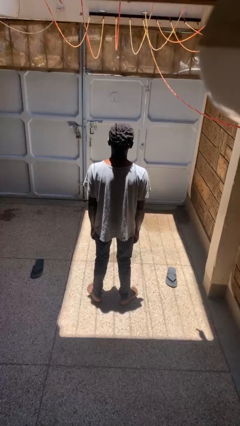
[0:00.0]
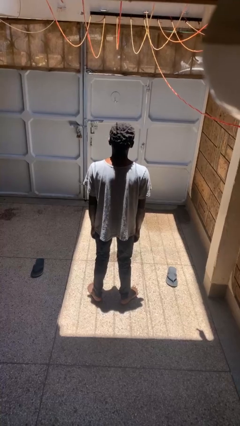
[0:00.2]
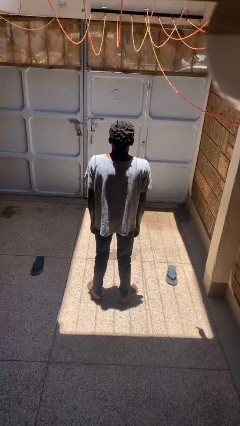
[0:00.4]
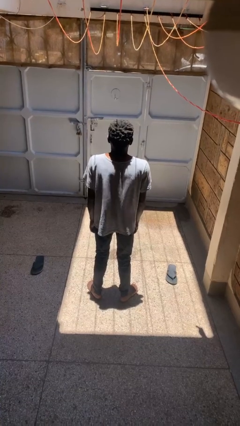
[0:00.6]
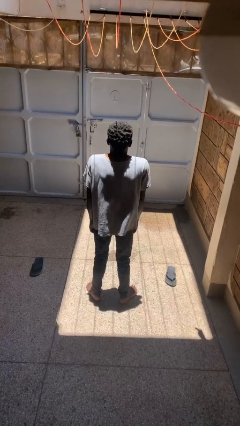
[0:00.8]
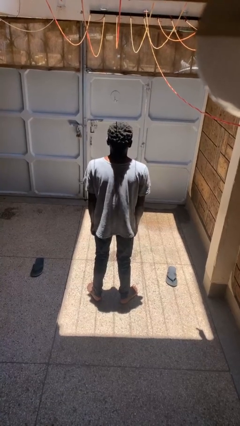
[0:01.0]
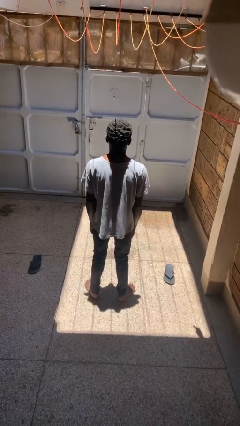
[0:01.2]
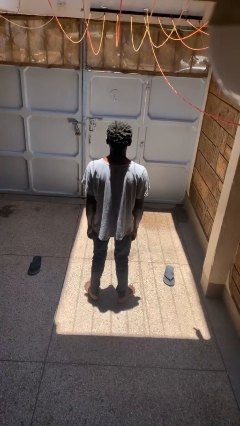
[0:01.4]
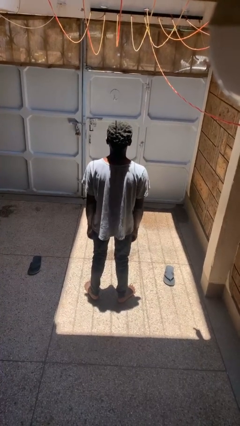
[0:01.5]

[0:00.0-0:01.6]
person shrugs

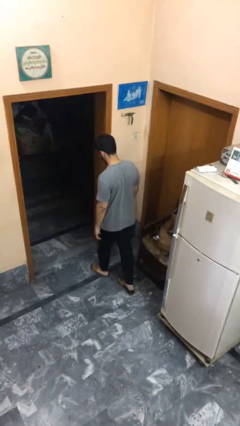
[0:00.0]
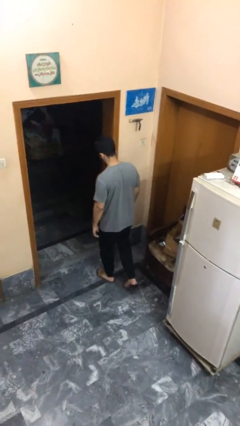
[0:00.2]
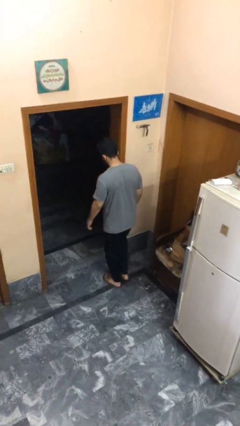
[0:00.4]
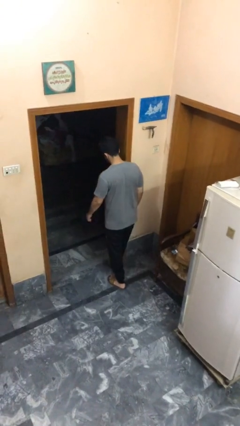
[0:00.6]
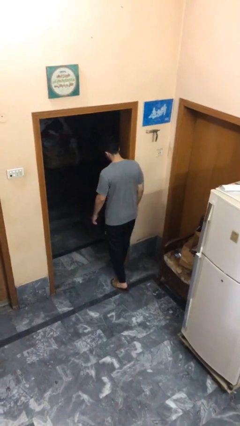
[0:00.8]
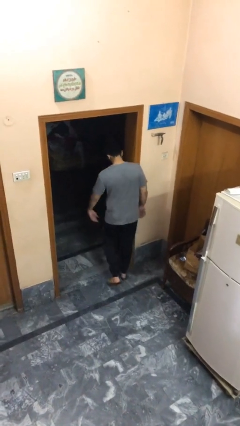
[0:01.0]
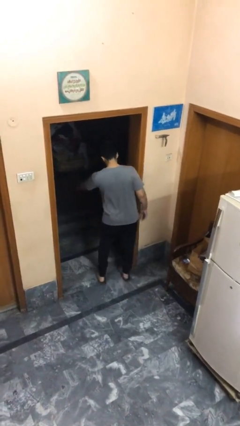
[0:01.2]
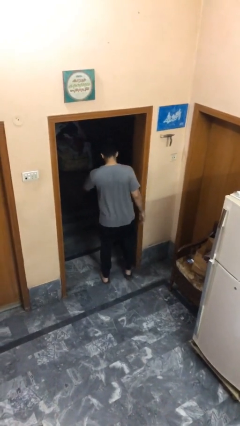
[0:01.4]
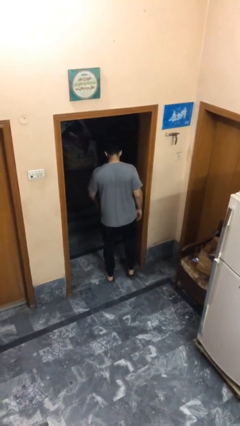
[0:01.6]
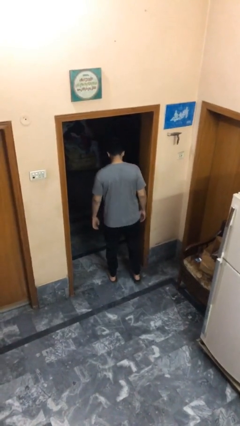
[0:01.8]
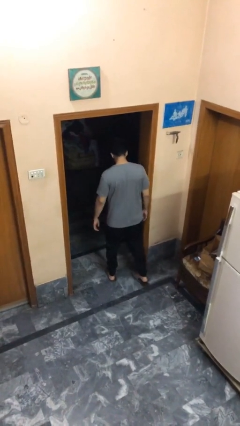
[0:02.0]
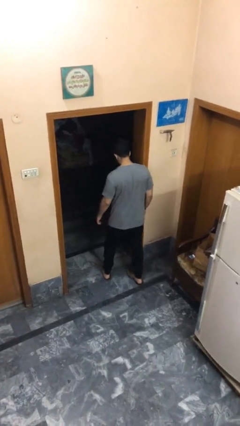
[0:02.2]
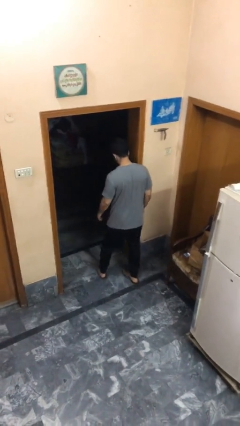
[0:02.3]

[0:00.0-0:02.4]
person bumps into wall

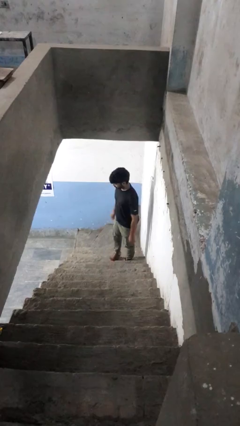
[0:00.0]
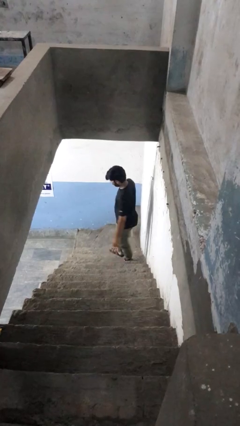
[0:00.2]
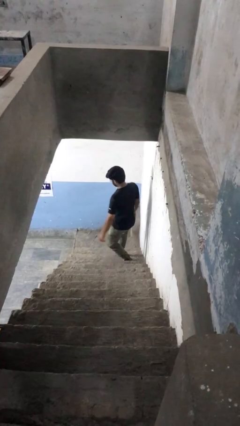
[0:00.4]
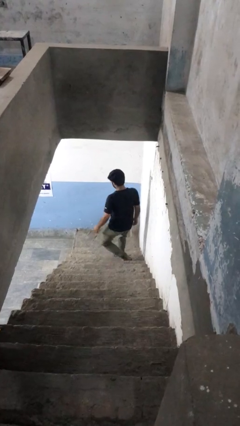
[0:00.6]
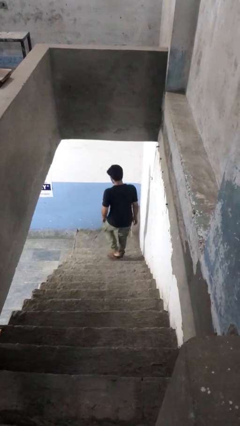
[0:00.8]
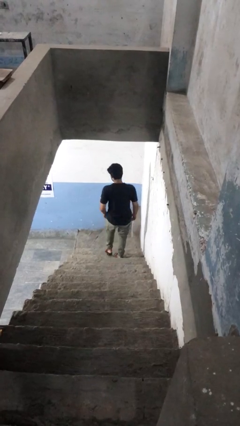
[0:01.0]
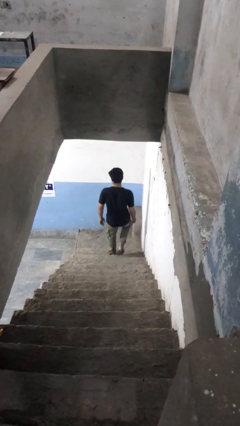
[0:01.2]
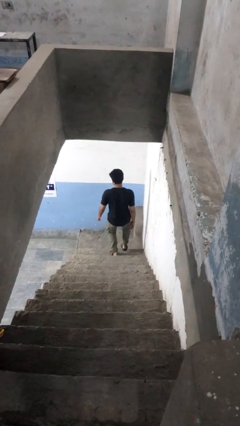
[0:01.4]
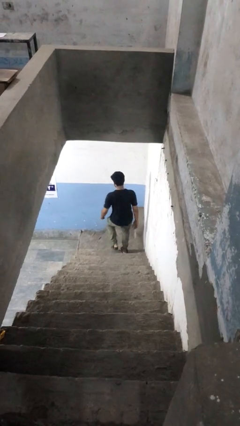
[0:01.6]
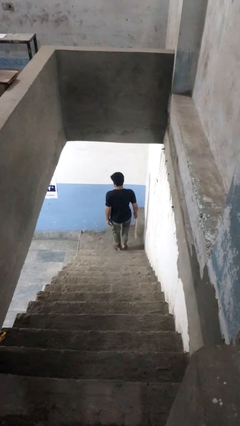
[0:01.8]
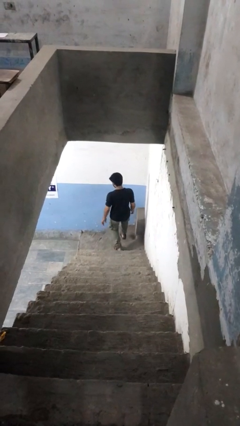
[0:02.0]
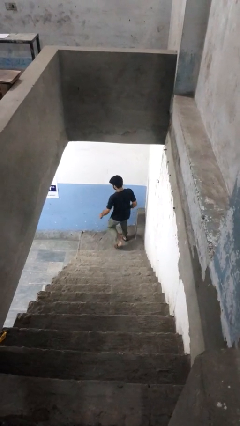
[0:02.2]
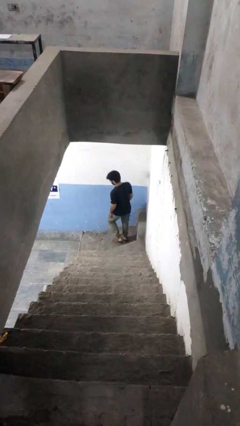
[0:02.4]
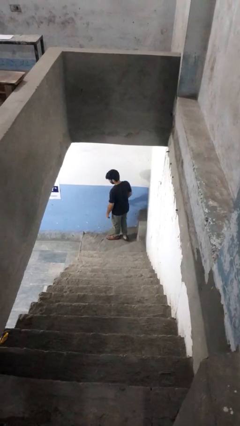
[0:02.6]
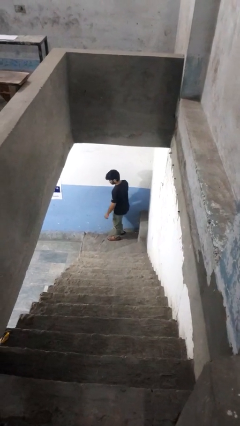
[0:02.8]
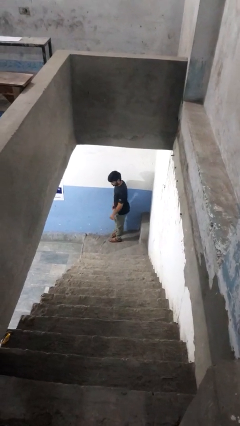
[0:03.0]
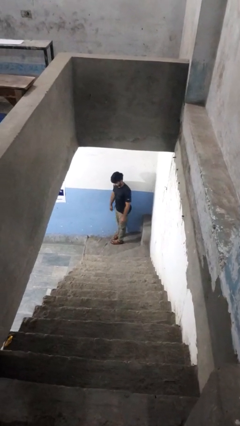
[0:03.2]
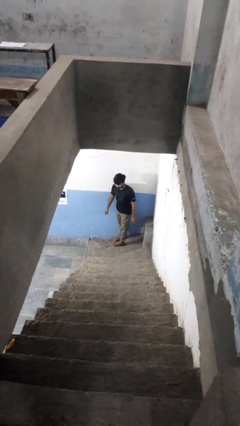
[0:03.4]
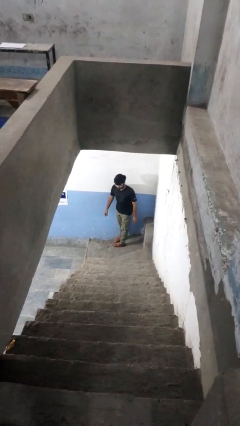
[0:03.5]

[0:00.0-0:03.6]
person climbs down stairs

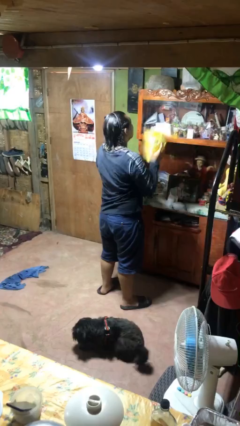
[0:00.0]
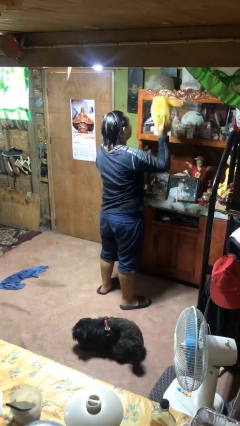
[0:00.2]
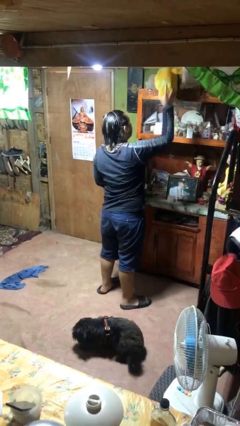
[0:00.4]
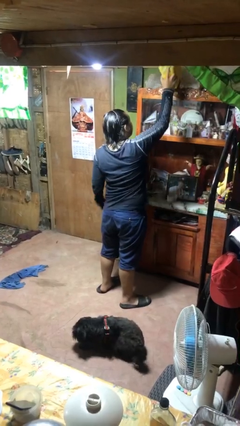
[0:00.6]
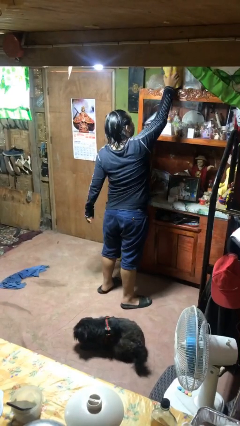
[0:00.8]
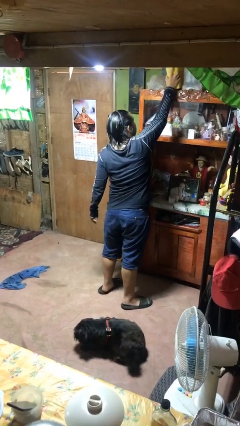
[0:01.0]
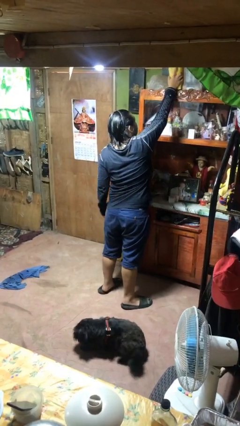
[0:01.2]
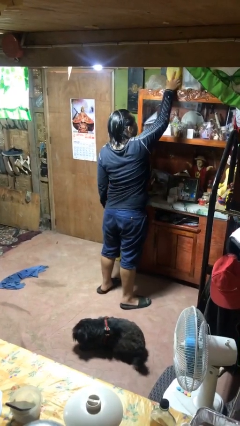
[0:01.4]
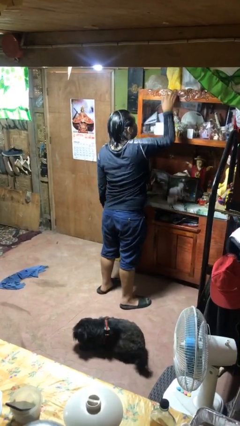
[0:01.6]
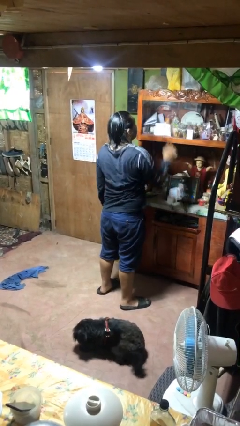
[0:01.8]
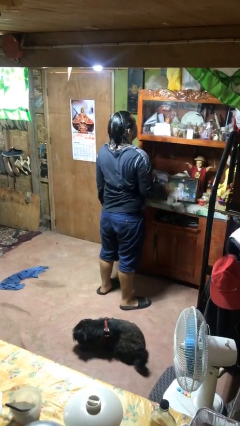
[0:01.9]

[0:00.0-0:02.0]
person puts down object on shelf

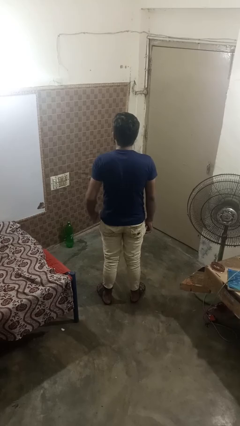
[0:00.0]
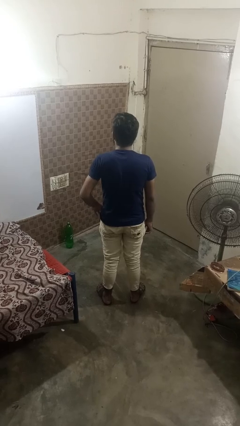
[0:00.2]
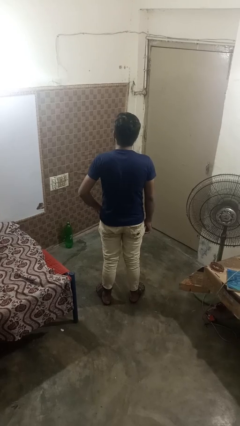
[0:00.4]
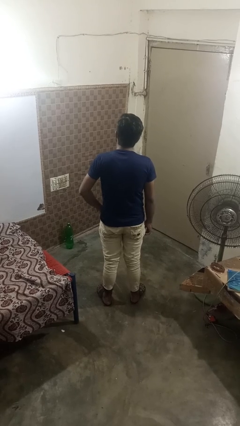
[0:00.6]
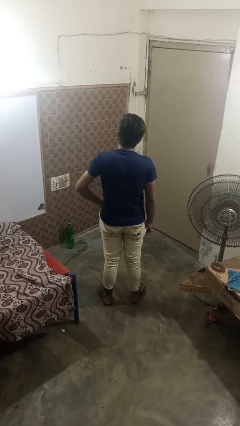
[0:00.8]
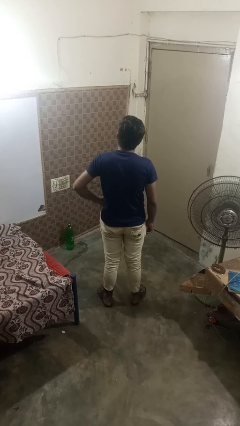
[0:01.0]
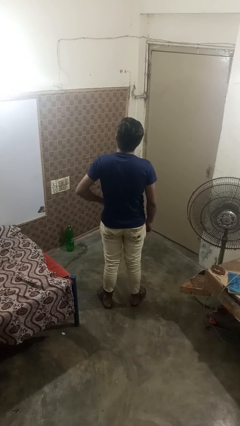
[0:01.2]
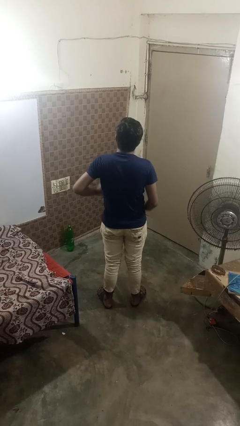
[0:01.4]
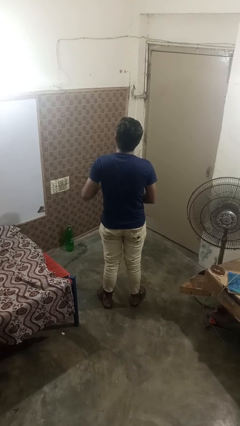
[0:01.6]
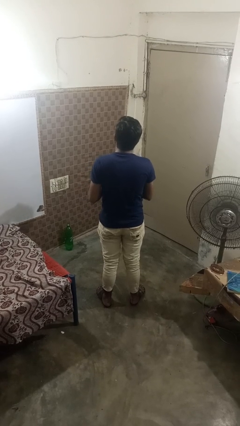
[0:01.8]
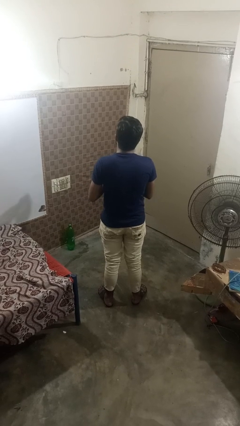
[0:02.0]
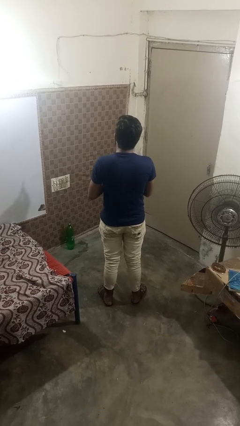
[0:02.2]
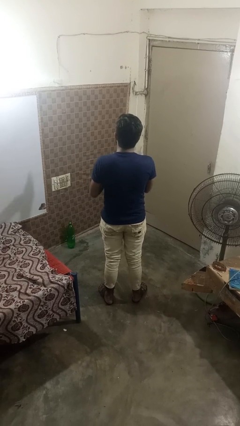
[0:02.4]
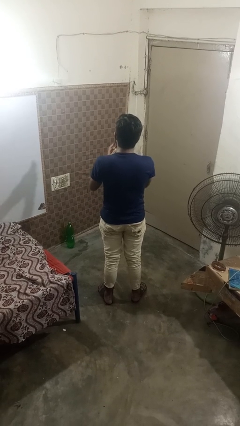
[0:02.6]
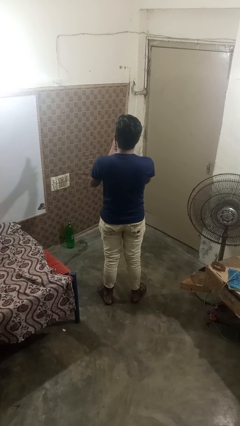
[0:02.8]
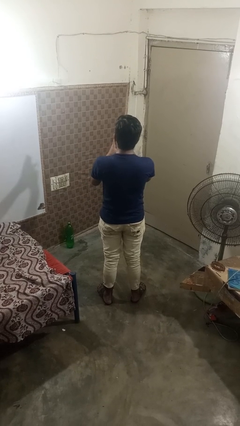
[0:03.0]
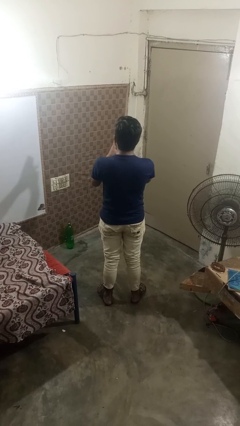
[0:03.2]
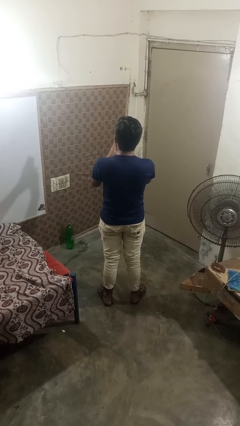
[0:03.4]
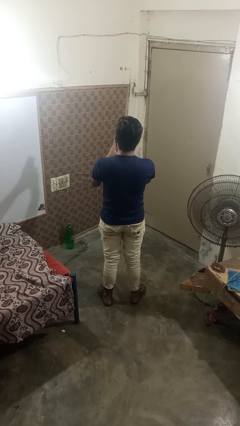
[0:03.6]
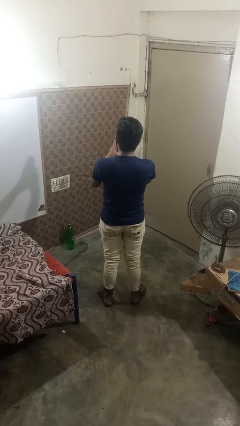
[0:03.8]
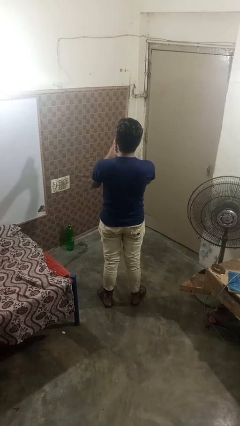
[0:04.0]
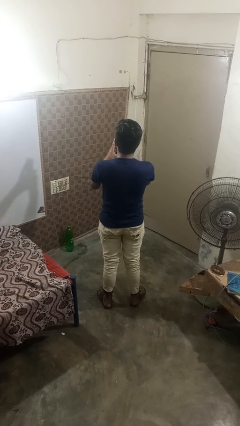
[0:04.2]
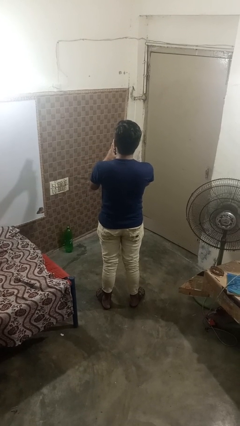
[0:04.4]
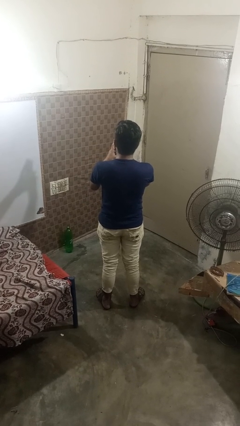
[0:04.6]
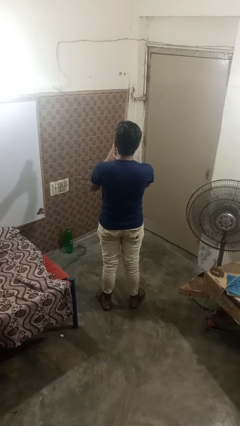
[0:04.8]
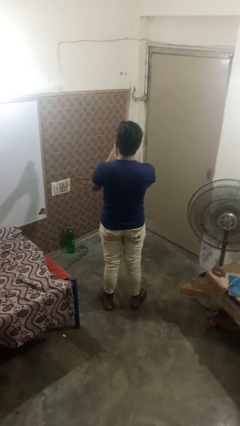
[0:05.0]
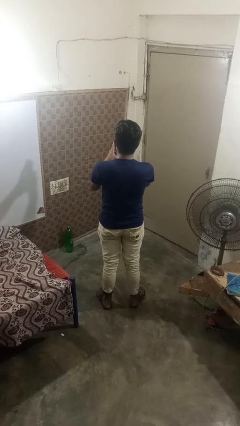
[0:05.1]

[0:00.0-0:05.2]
person takes phone from pocket

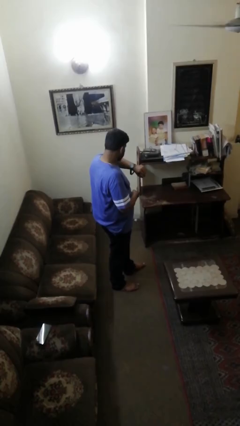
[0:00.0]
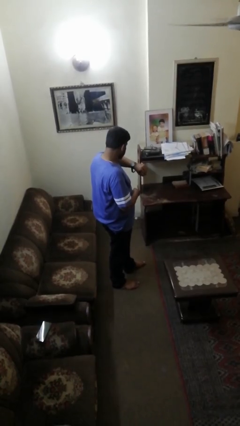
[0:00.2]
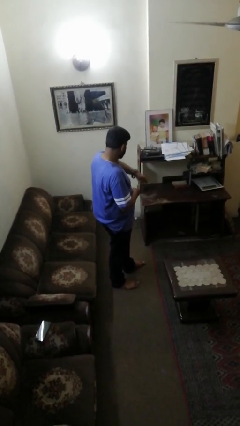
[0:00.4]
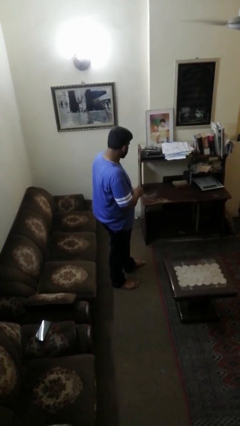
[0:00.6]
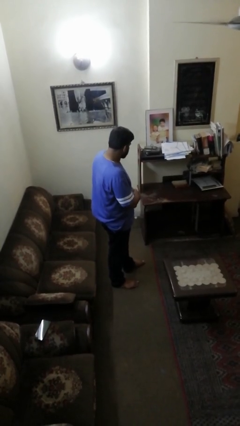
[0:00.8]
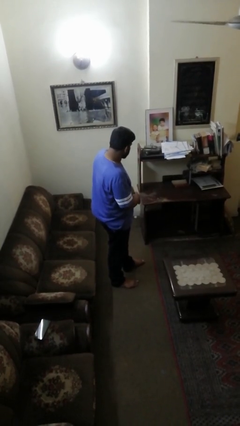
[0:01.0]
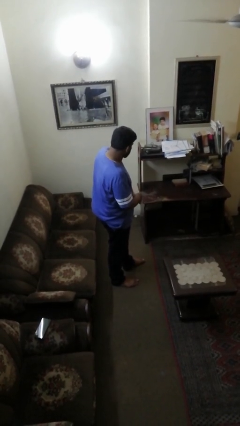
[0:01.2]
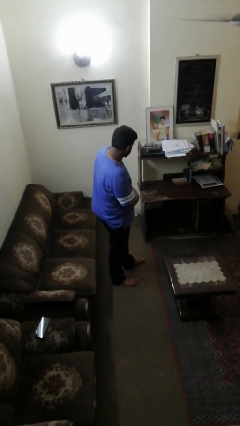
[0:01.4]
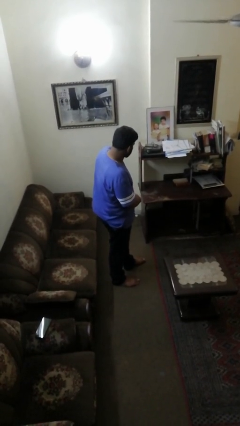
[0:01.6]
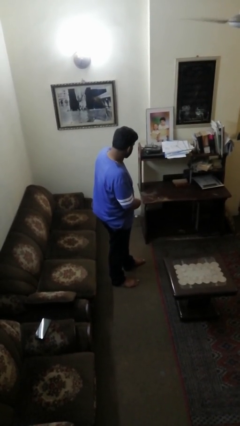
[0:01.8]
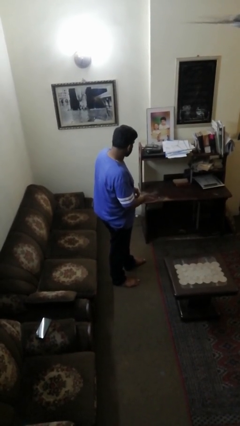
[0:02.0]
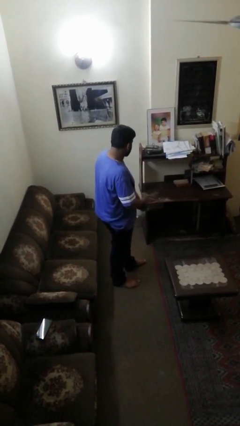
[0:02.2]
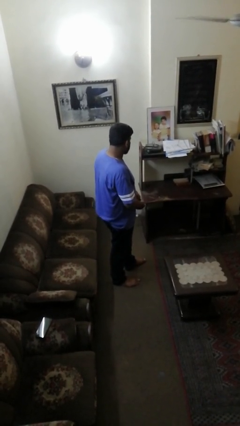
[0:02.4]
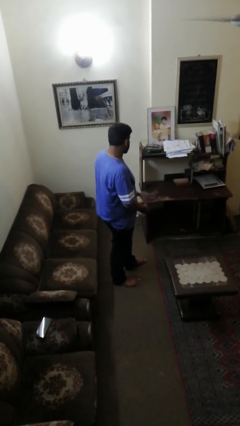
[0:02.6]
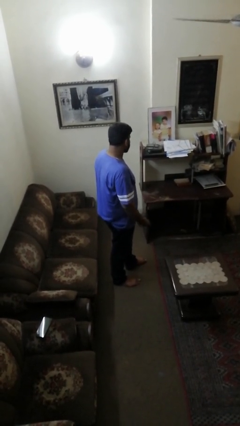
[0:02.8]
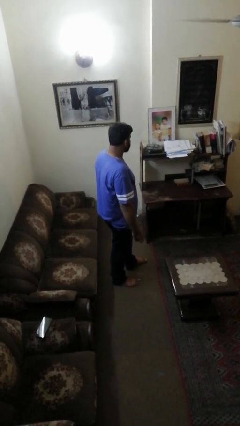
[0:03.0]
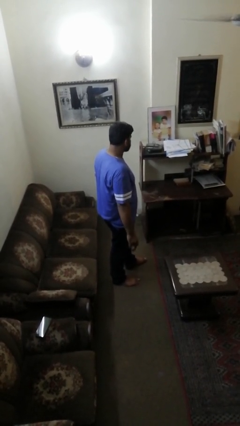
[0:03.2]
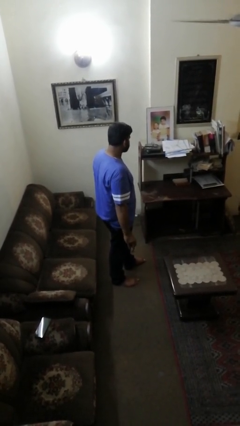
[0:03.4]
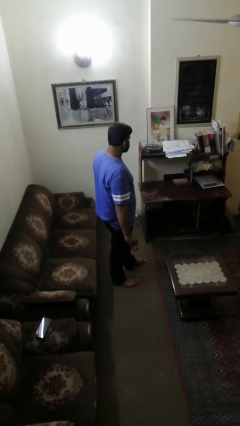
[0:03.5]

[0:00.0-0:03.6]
person takes off wristwatch
